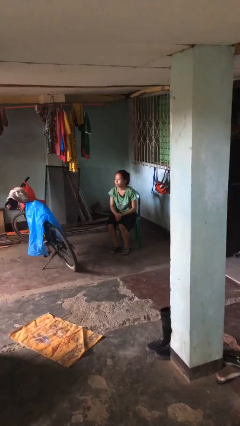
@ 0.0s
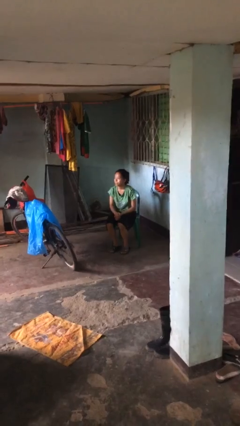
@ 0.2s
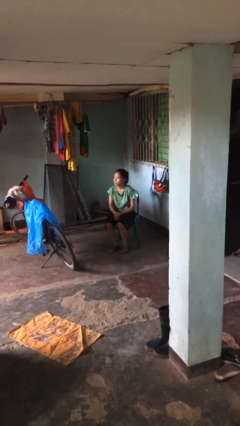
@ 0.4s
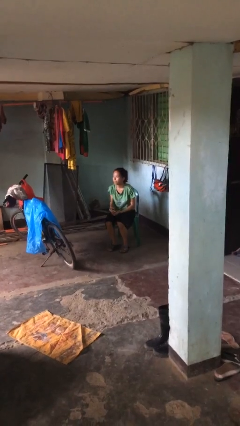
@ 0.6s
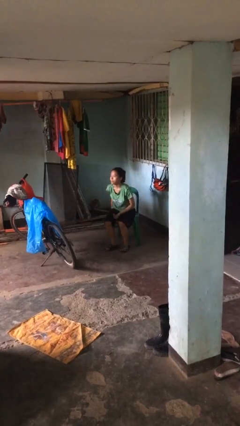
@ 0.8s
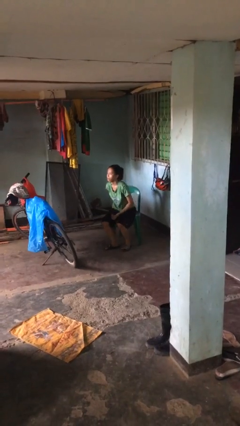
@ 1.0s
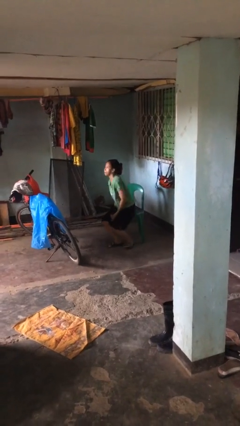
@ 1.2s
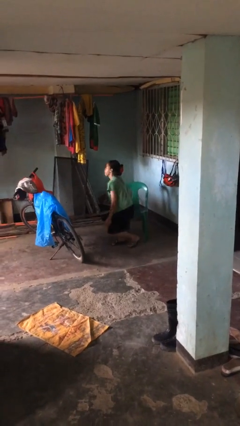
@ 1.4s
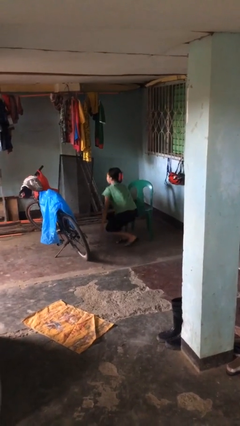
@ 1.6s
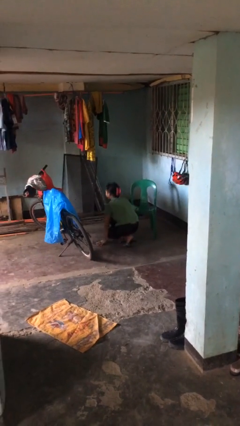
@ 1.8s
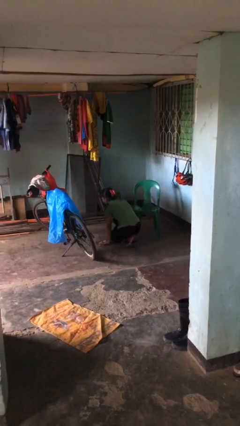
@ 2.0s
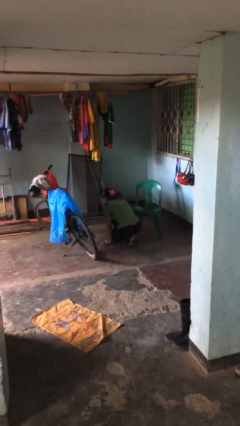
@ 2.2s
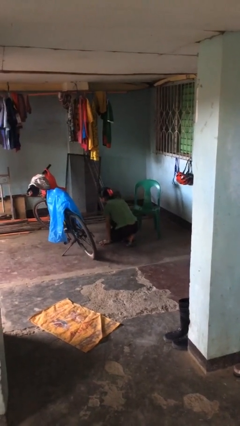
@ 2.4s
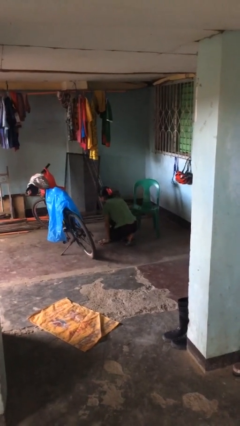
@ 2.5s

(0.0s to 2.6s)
person falls from chair

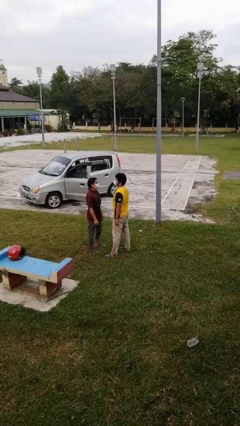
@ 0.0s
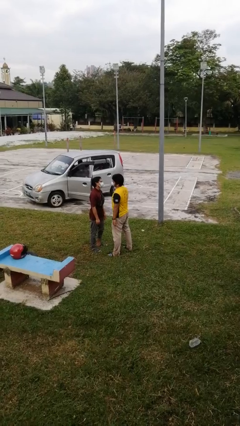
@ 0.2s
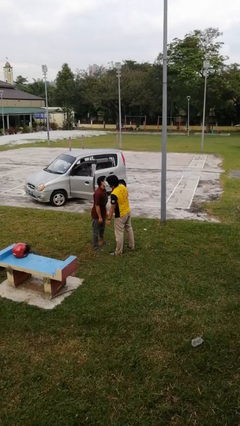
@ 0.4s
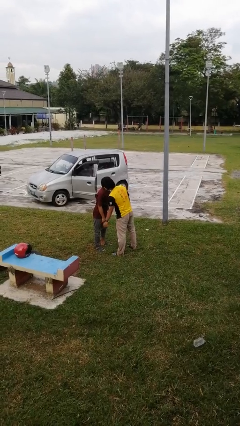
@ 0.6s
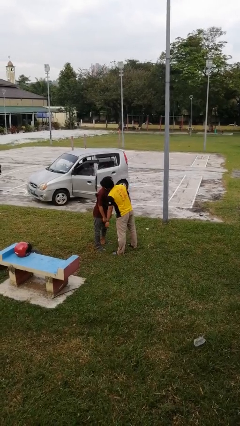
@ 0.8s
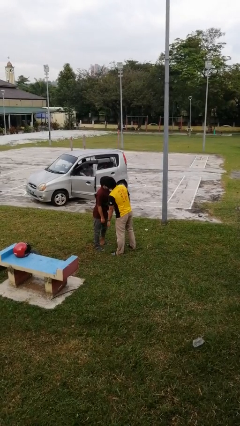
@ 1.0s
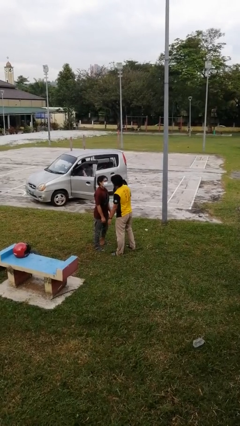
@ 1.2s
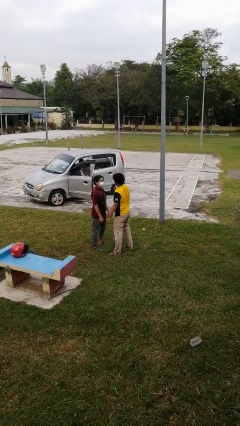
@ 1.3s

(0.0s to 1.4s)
person kisses cheek of person

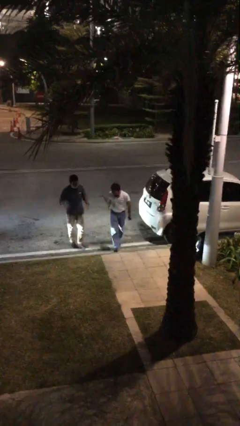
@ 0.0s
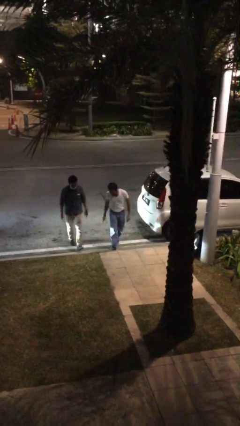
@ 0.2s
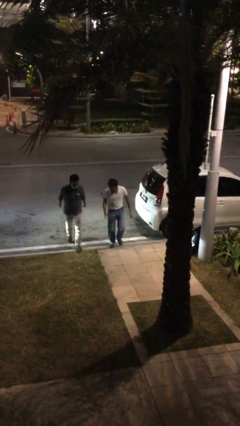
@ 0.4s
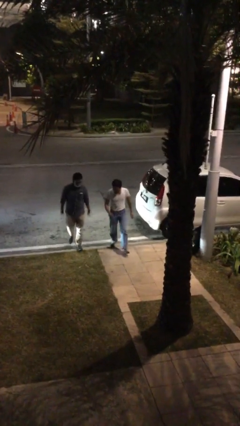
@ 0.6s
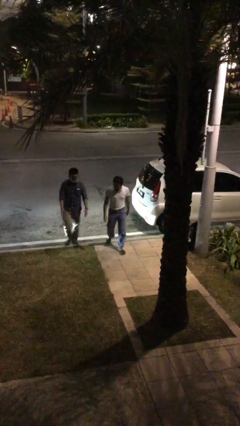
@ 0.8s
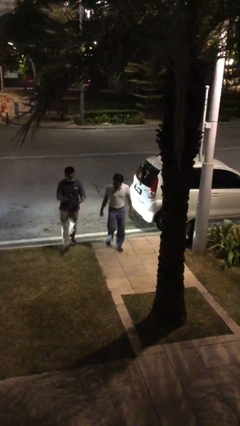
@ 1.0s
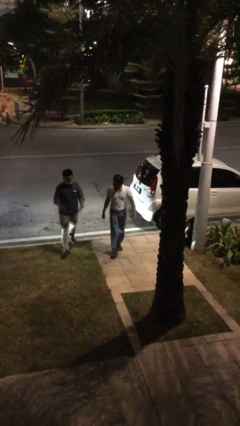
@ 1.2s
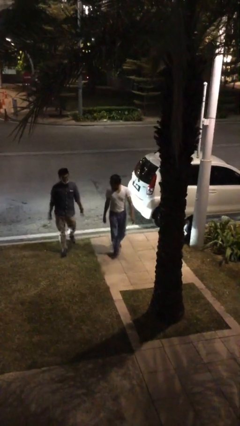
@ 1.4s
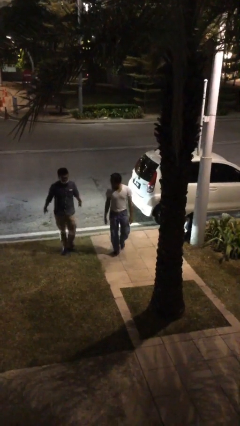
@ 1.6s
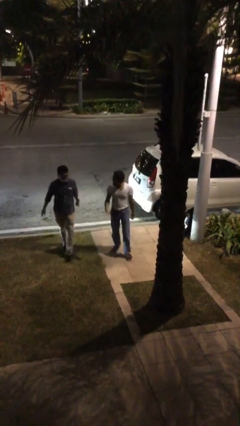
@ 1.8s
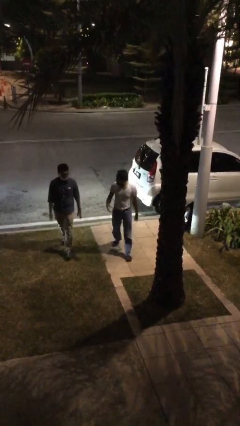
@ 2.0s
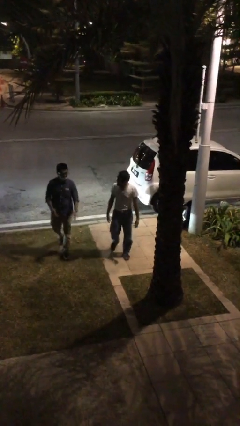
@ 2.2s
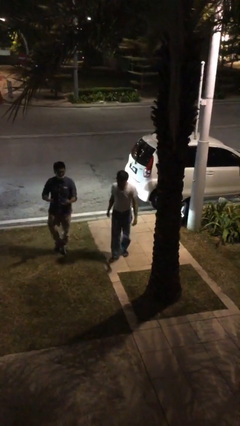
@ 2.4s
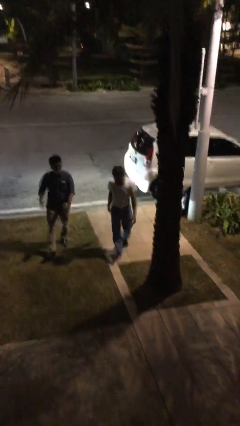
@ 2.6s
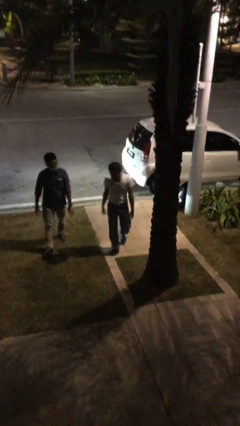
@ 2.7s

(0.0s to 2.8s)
person talks to person

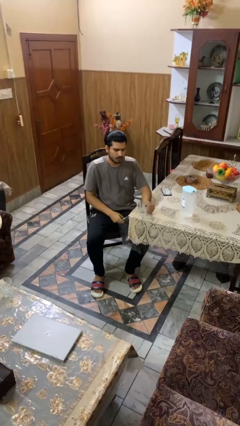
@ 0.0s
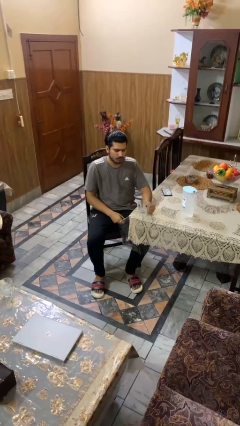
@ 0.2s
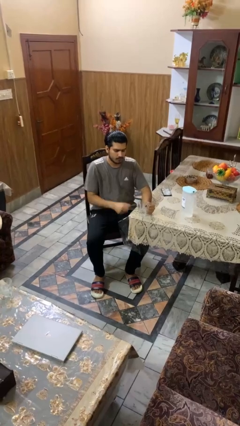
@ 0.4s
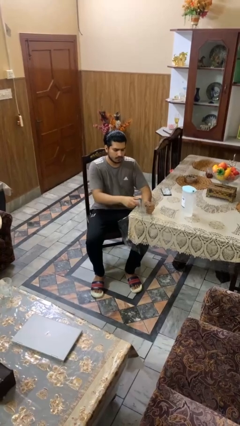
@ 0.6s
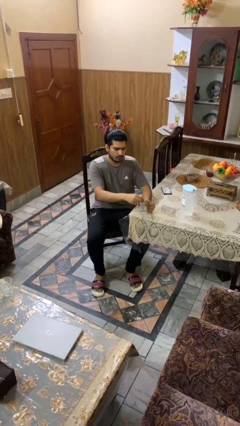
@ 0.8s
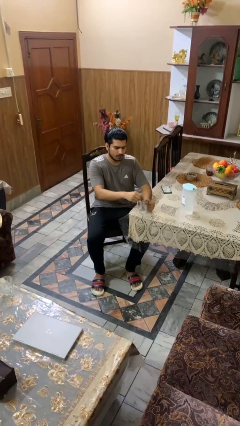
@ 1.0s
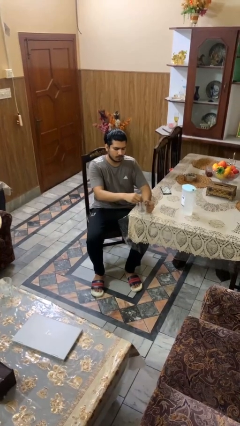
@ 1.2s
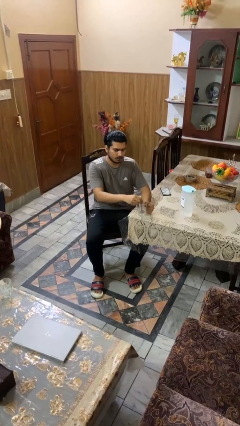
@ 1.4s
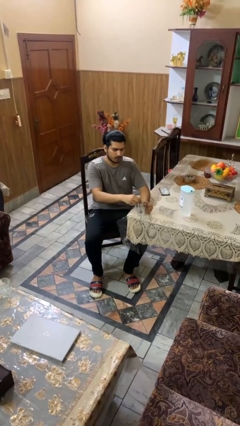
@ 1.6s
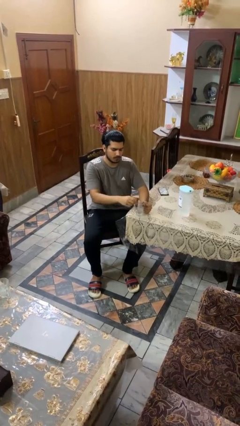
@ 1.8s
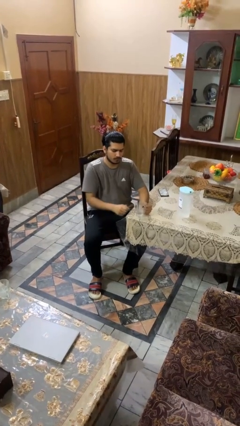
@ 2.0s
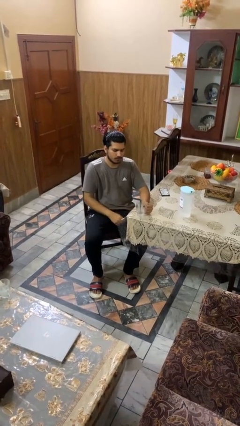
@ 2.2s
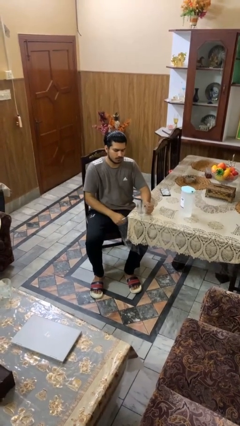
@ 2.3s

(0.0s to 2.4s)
person stirs mug

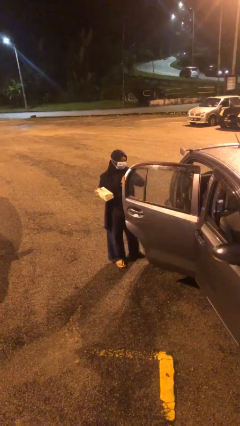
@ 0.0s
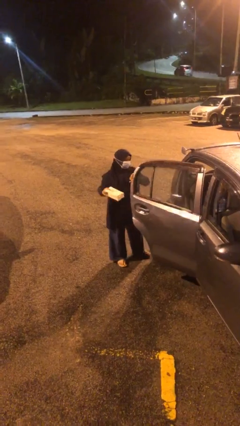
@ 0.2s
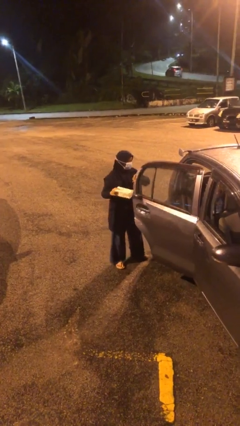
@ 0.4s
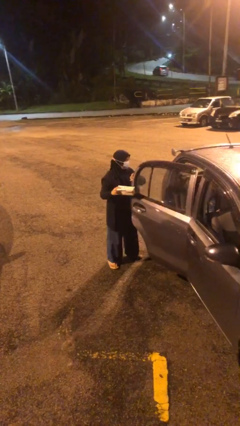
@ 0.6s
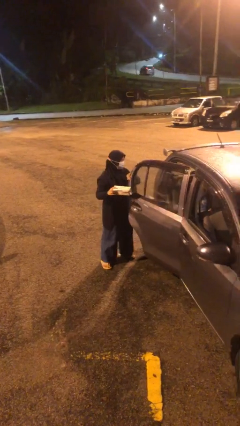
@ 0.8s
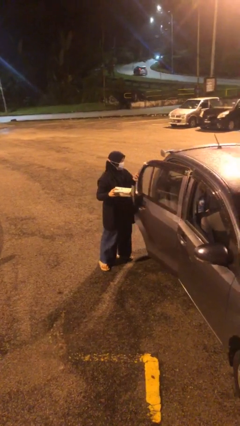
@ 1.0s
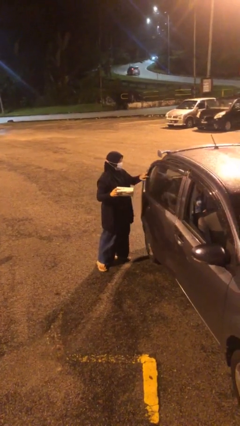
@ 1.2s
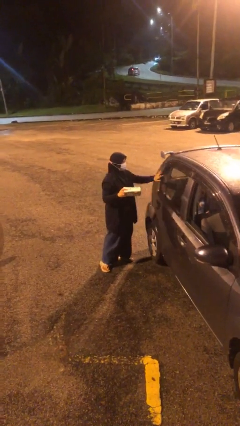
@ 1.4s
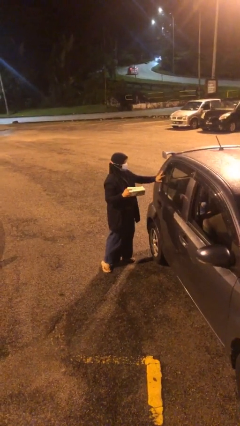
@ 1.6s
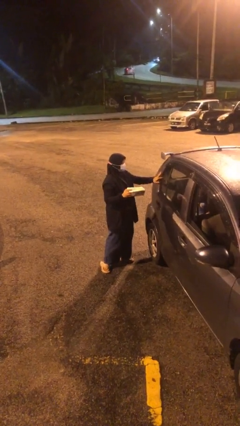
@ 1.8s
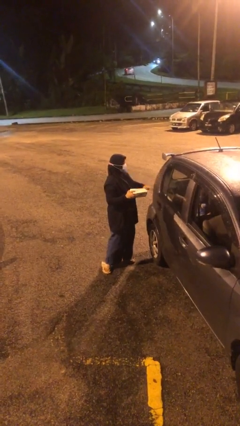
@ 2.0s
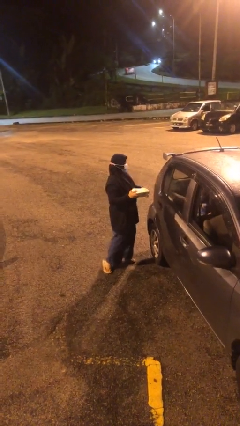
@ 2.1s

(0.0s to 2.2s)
person closes car door

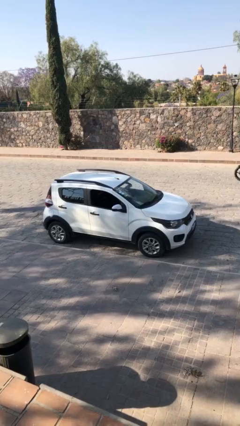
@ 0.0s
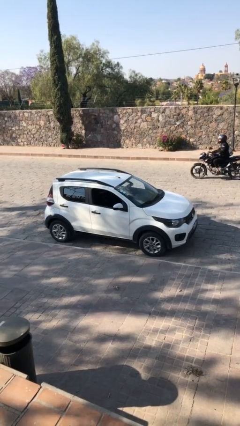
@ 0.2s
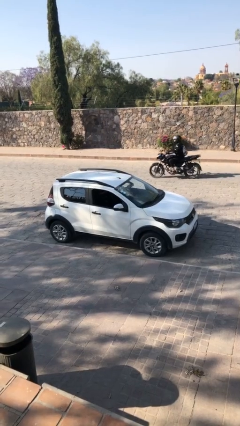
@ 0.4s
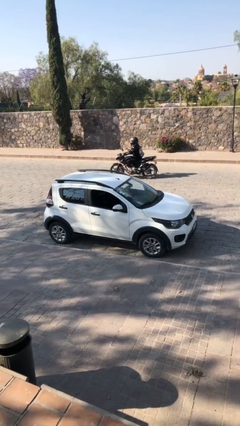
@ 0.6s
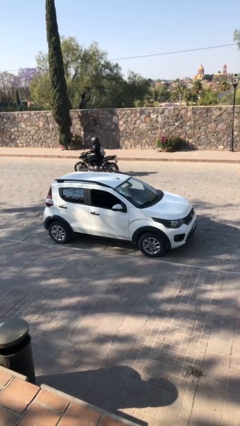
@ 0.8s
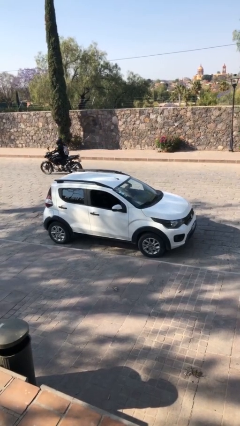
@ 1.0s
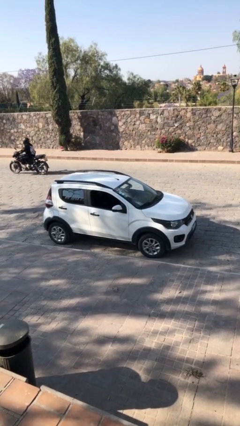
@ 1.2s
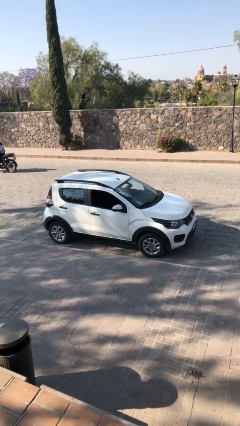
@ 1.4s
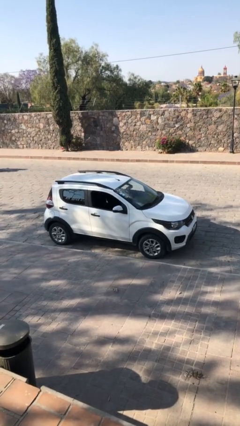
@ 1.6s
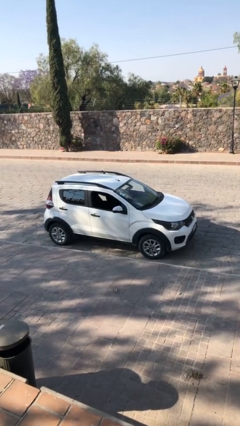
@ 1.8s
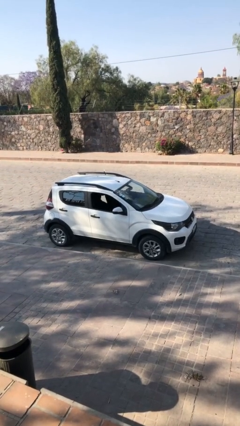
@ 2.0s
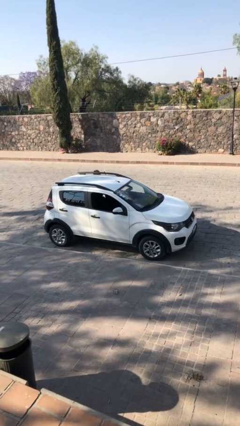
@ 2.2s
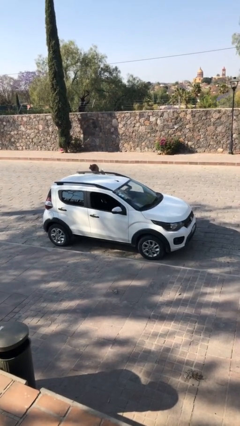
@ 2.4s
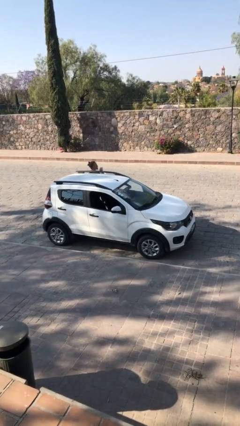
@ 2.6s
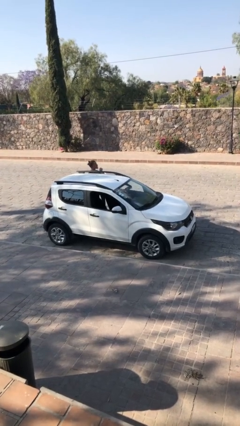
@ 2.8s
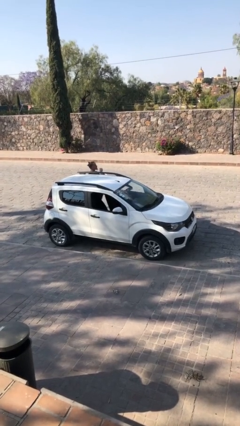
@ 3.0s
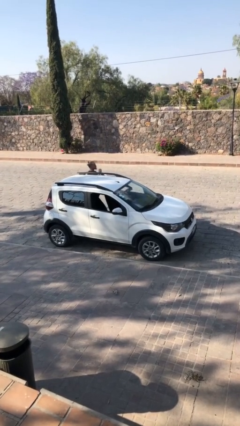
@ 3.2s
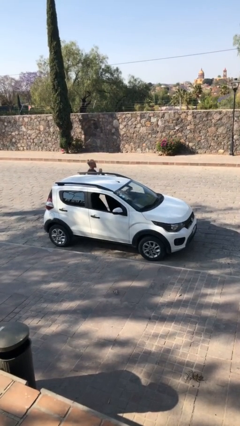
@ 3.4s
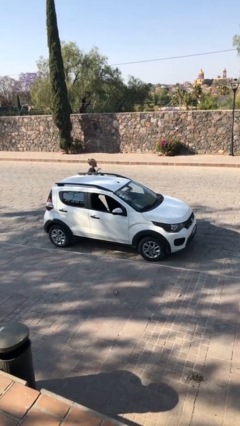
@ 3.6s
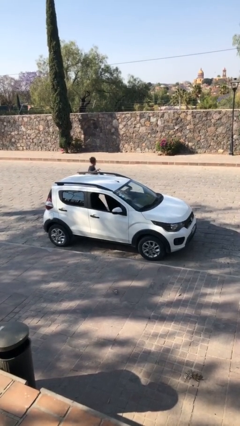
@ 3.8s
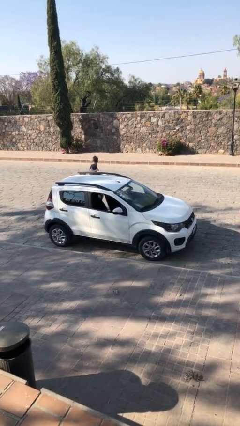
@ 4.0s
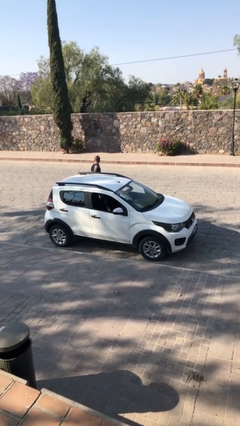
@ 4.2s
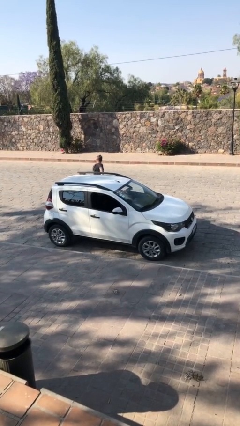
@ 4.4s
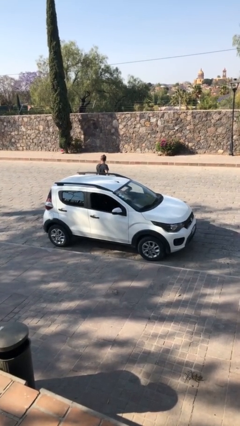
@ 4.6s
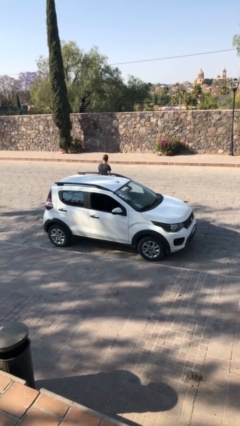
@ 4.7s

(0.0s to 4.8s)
car drops off person

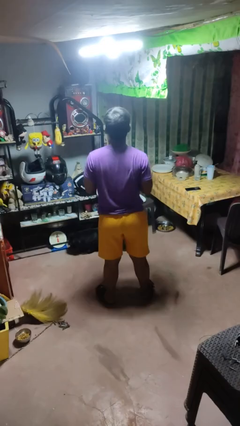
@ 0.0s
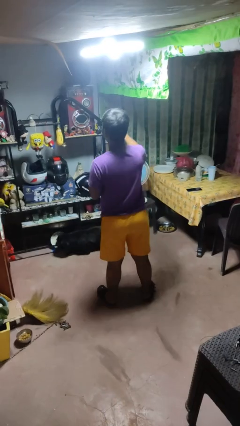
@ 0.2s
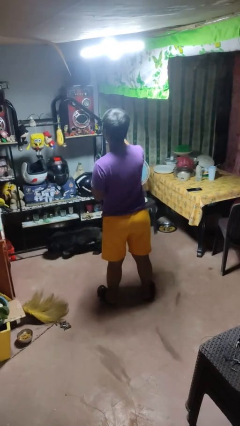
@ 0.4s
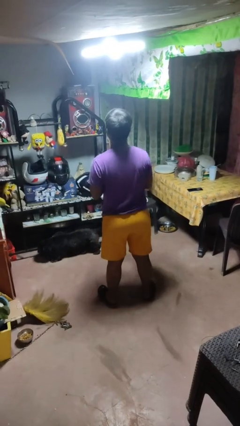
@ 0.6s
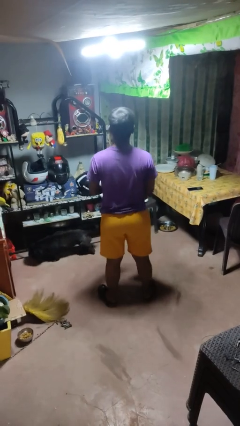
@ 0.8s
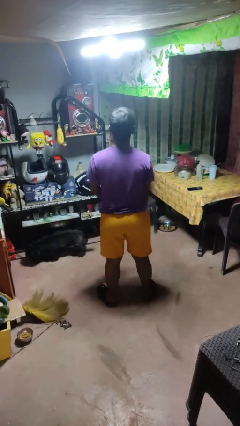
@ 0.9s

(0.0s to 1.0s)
person punches
